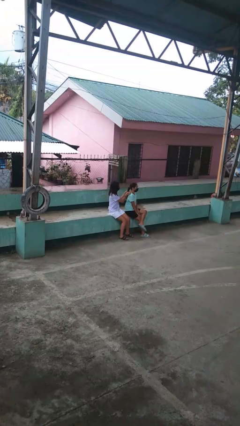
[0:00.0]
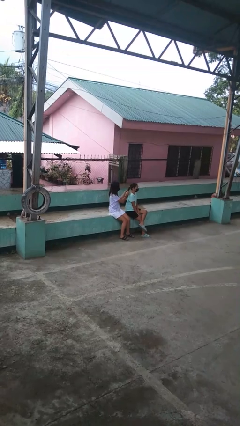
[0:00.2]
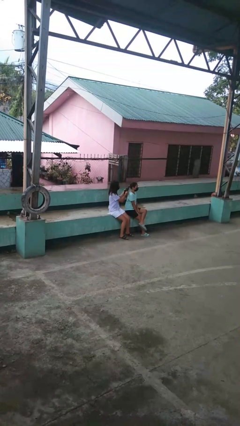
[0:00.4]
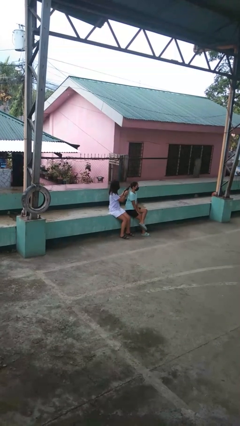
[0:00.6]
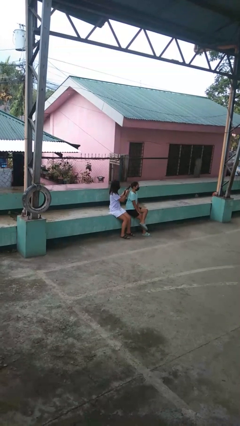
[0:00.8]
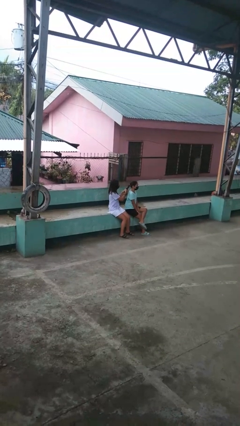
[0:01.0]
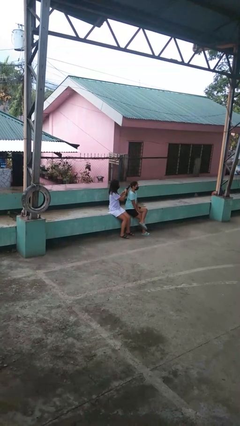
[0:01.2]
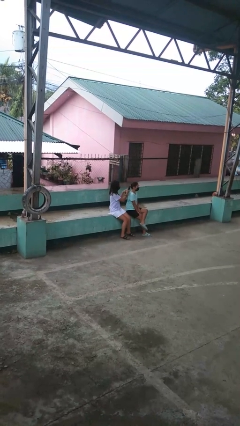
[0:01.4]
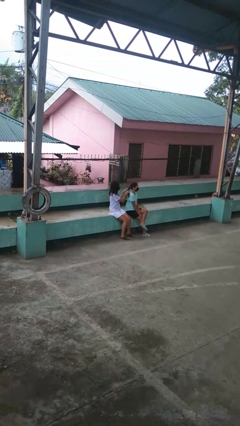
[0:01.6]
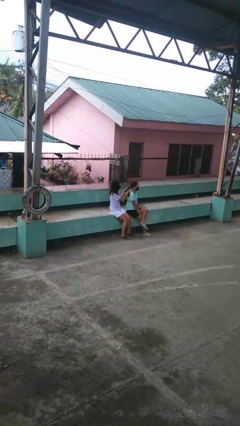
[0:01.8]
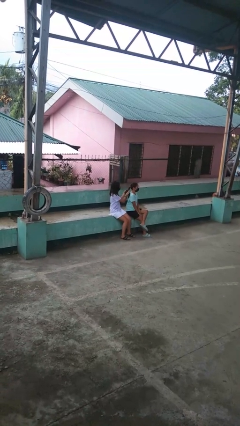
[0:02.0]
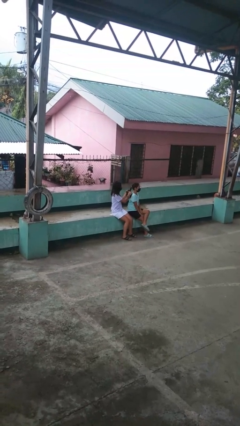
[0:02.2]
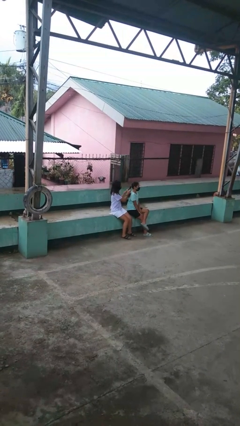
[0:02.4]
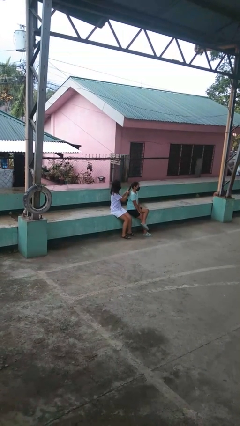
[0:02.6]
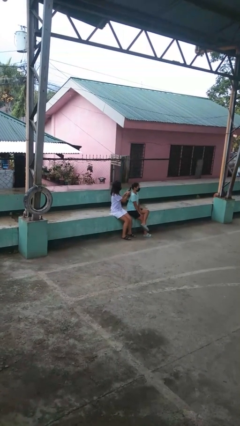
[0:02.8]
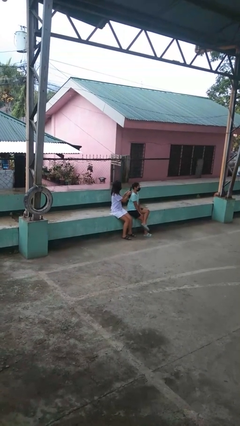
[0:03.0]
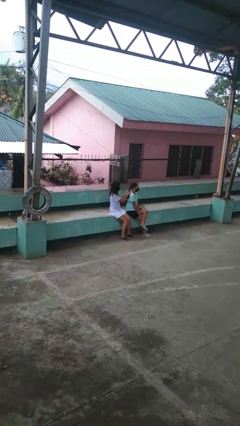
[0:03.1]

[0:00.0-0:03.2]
person braids hair of person

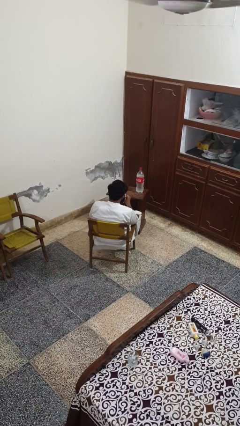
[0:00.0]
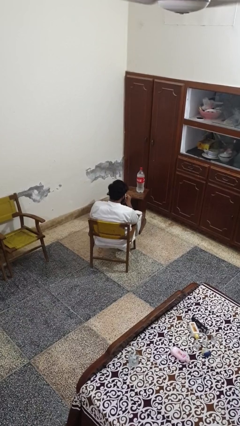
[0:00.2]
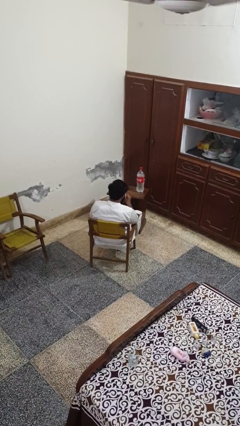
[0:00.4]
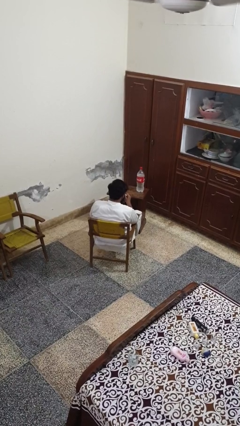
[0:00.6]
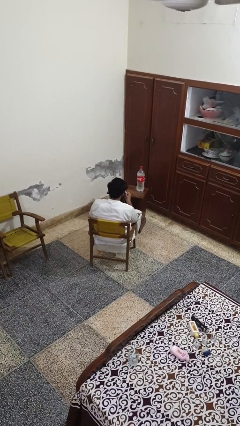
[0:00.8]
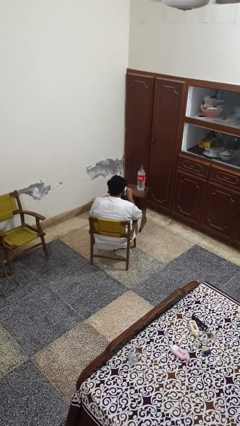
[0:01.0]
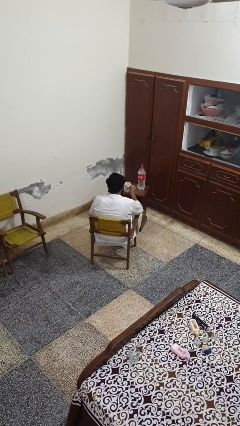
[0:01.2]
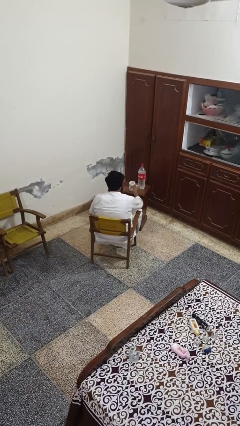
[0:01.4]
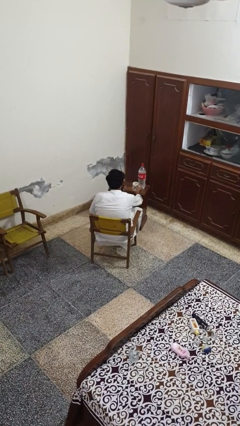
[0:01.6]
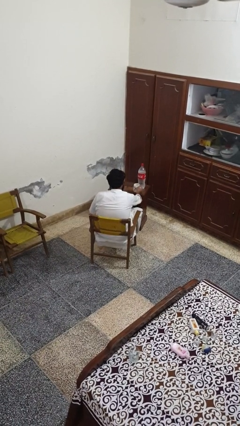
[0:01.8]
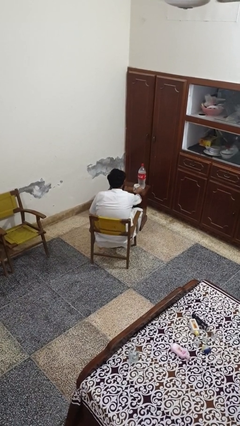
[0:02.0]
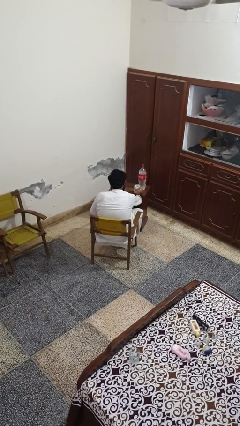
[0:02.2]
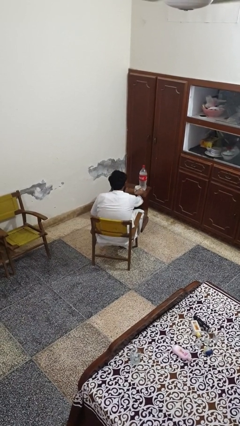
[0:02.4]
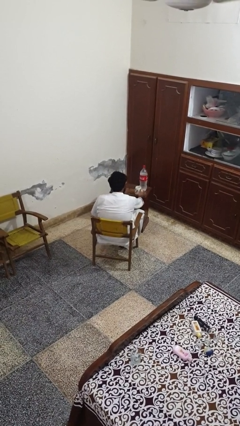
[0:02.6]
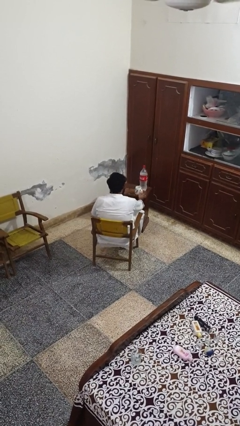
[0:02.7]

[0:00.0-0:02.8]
person puts down object on table

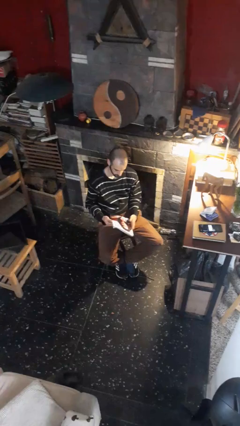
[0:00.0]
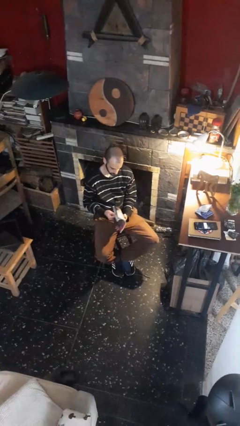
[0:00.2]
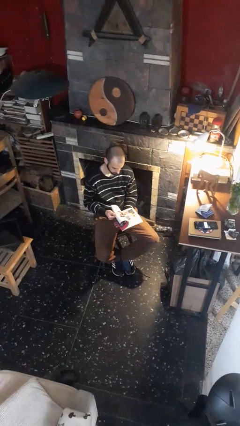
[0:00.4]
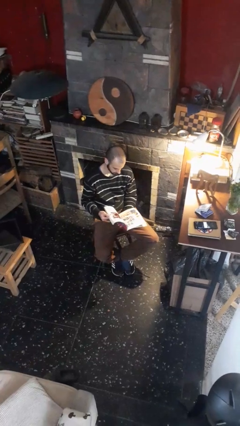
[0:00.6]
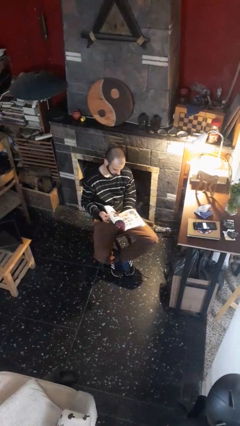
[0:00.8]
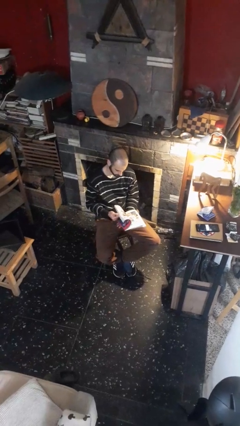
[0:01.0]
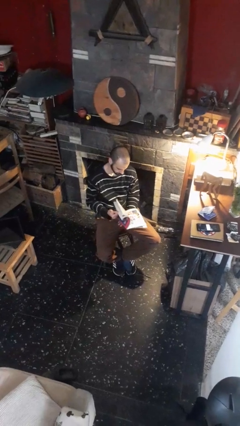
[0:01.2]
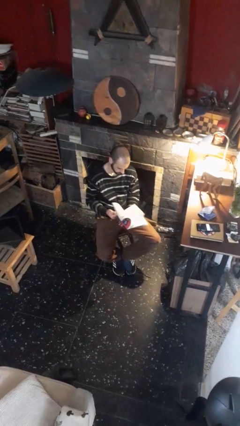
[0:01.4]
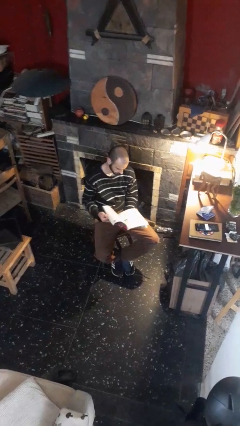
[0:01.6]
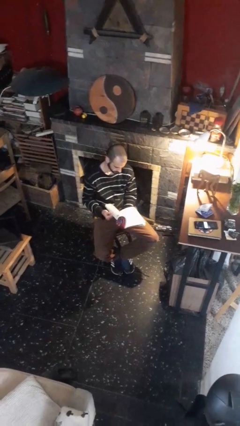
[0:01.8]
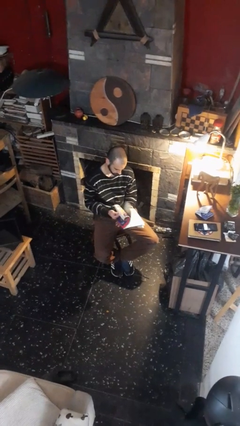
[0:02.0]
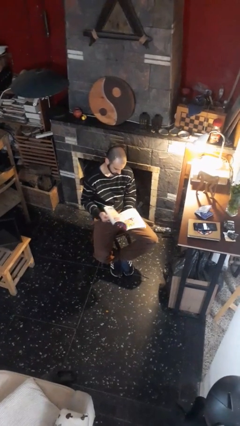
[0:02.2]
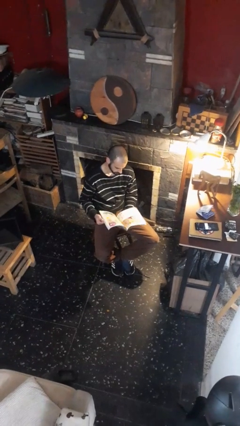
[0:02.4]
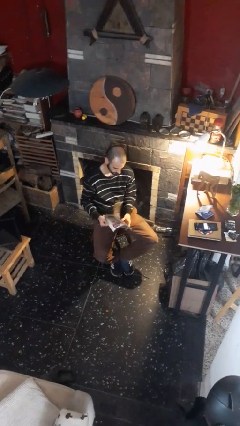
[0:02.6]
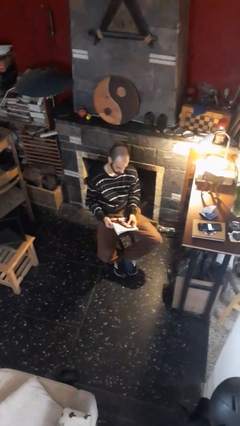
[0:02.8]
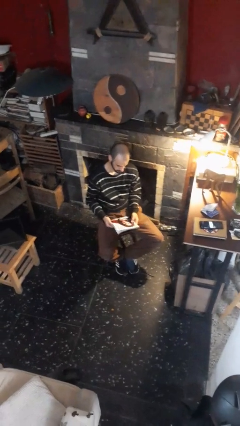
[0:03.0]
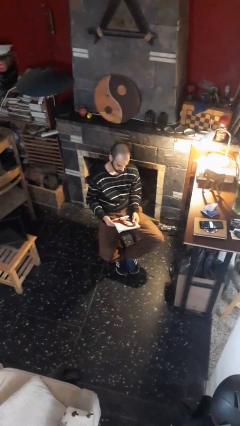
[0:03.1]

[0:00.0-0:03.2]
person reads magazine

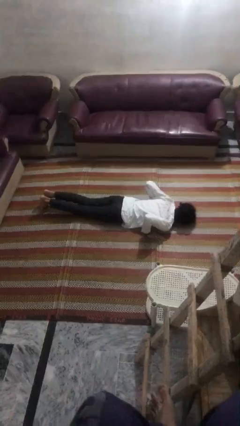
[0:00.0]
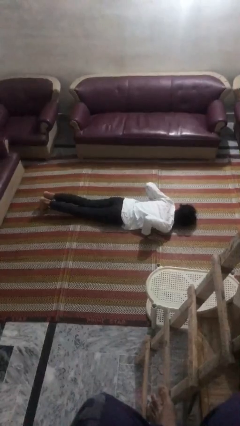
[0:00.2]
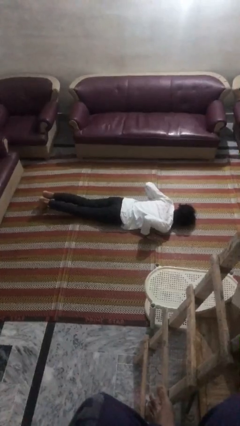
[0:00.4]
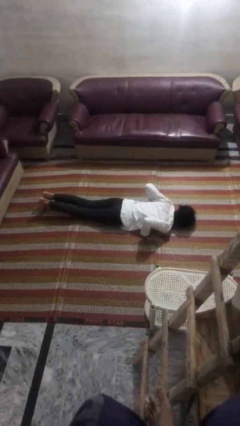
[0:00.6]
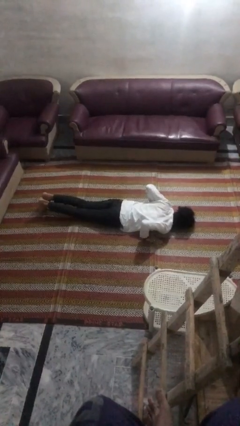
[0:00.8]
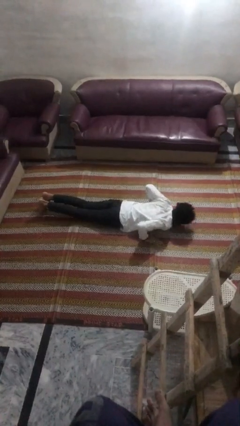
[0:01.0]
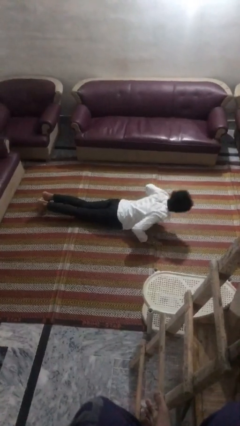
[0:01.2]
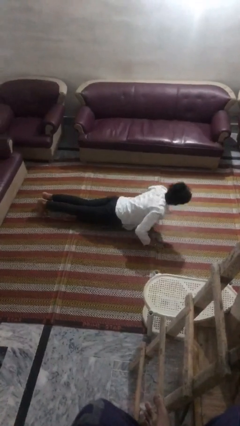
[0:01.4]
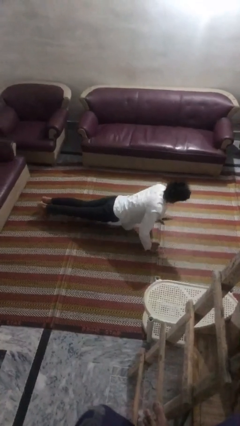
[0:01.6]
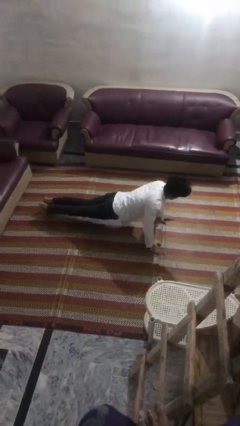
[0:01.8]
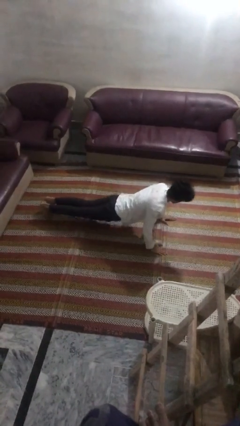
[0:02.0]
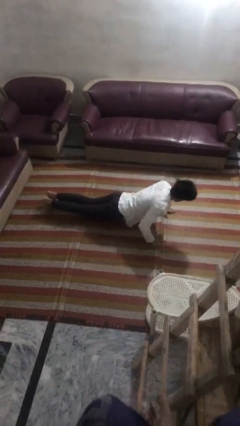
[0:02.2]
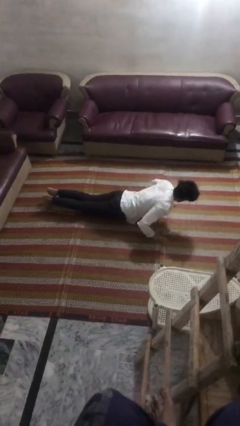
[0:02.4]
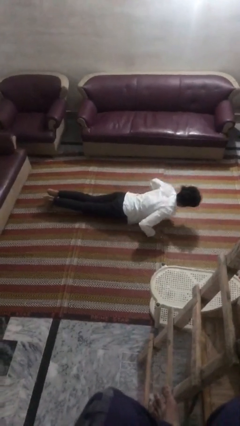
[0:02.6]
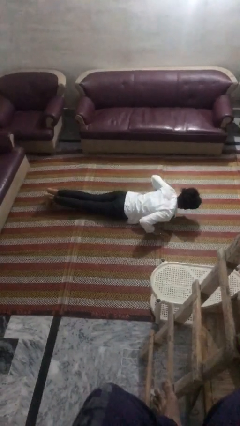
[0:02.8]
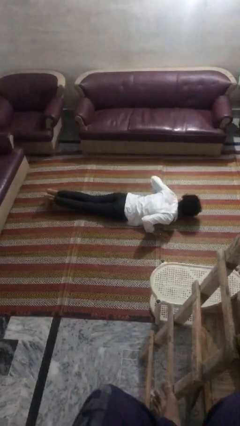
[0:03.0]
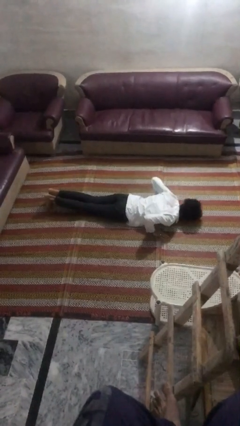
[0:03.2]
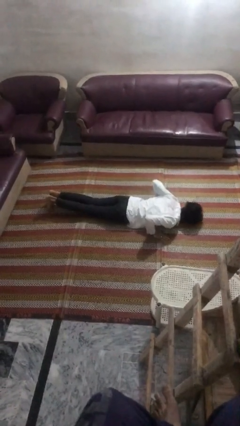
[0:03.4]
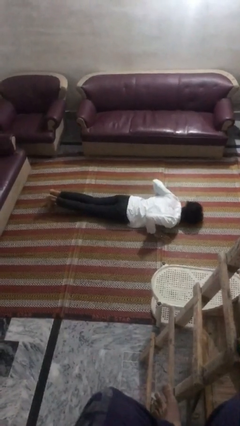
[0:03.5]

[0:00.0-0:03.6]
person exercises with pushup

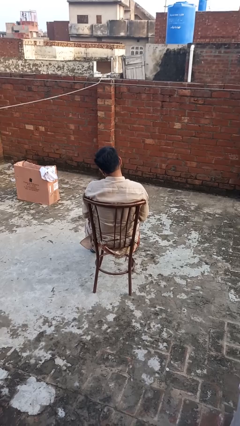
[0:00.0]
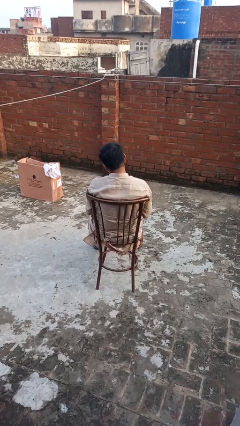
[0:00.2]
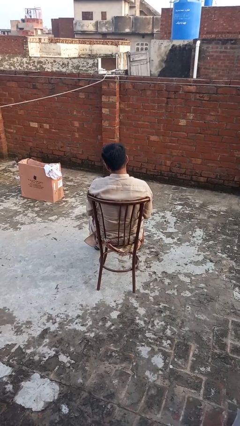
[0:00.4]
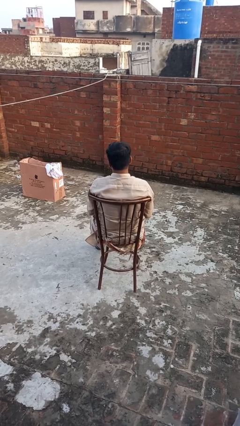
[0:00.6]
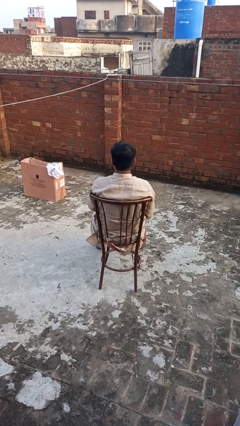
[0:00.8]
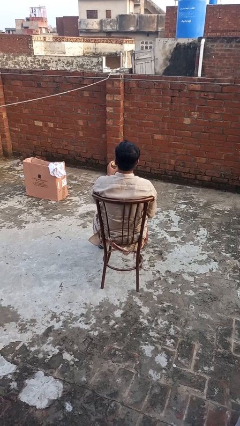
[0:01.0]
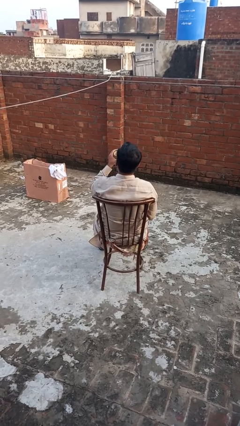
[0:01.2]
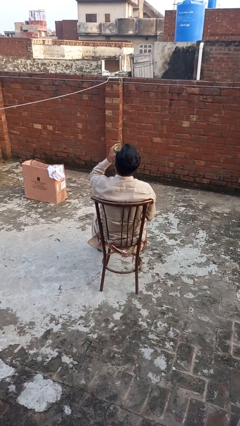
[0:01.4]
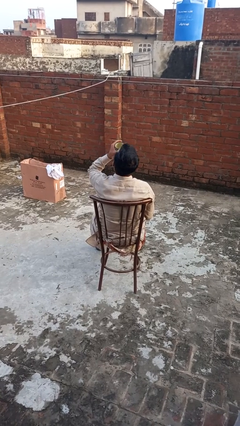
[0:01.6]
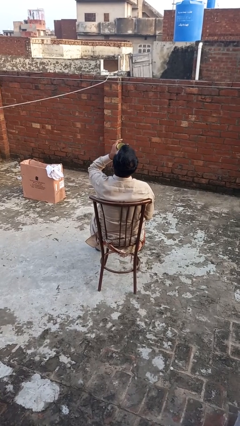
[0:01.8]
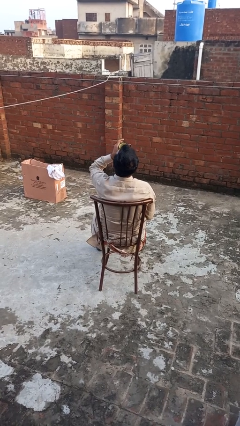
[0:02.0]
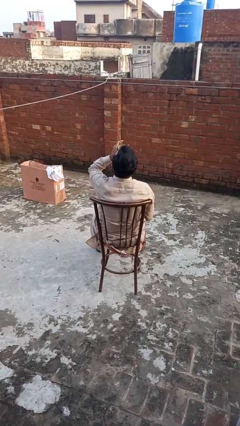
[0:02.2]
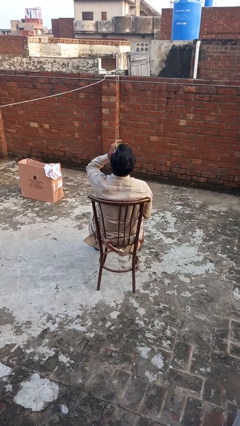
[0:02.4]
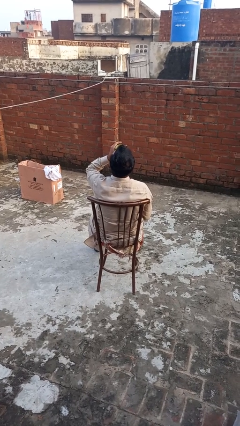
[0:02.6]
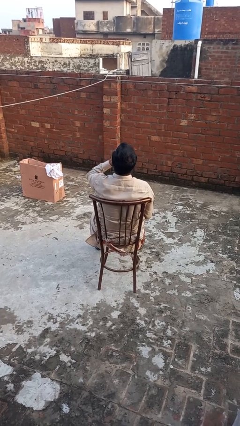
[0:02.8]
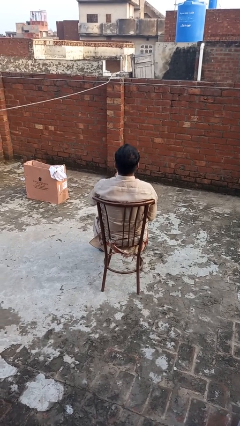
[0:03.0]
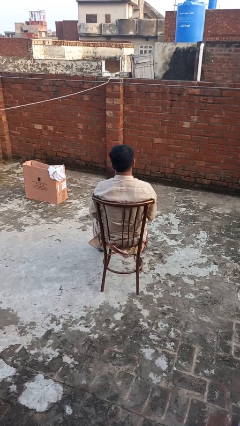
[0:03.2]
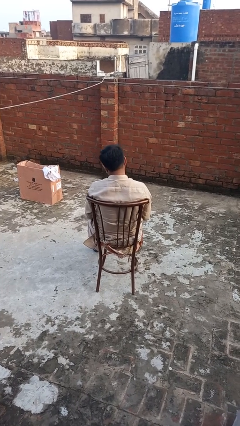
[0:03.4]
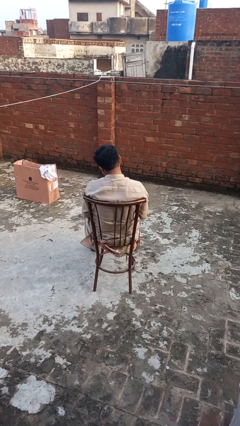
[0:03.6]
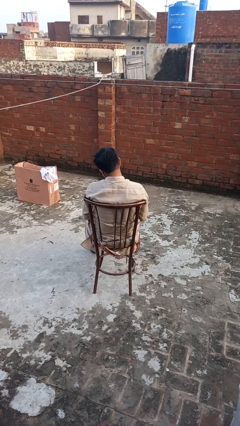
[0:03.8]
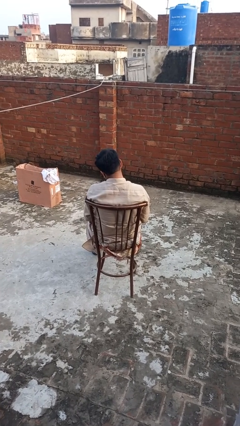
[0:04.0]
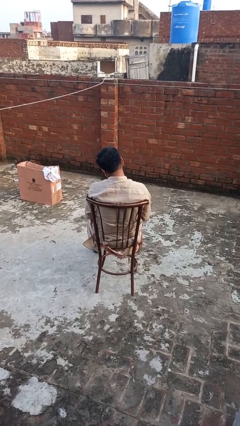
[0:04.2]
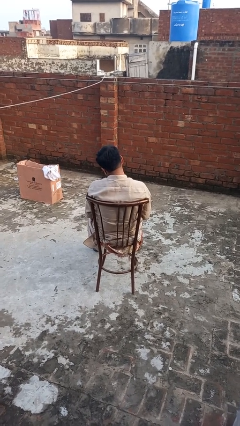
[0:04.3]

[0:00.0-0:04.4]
person drinks from mug

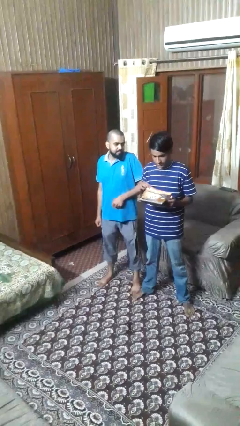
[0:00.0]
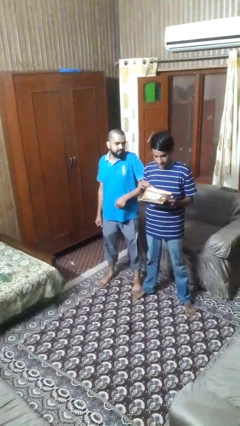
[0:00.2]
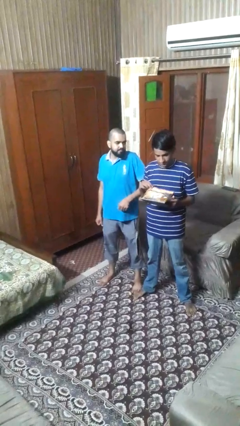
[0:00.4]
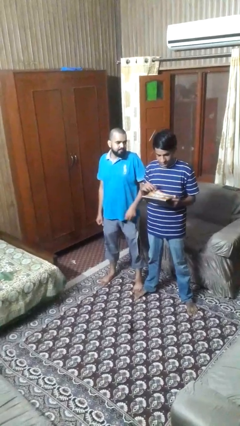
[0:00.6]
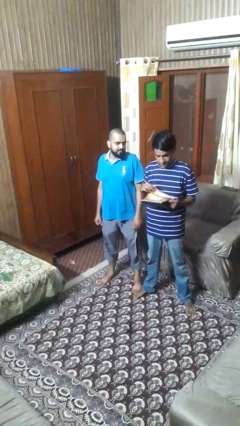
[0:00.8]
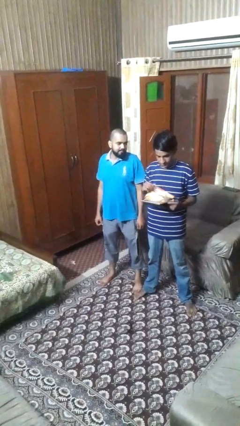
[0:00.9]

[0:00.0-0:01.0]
person nudges person with elbow
